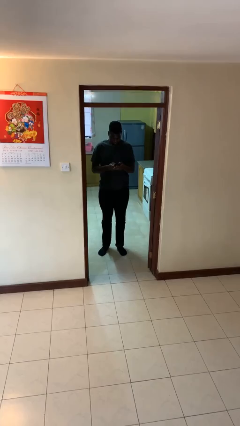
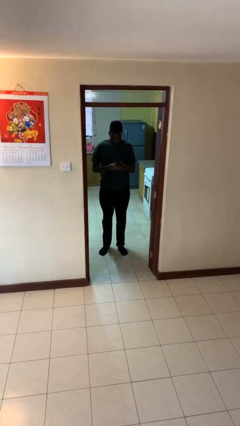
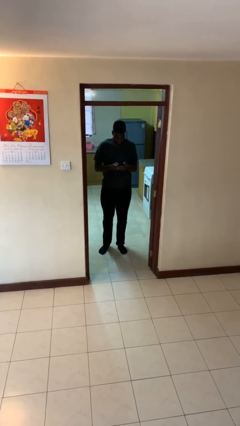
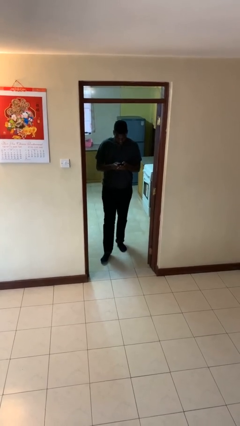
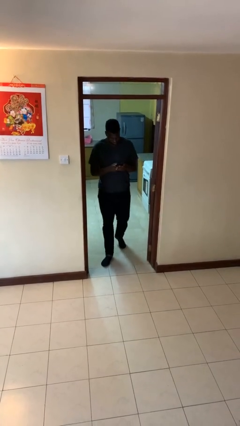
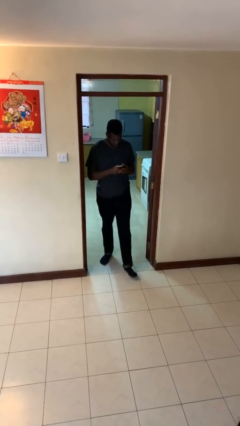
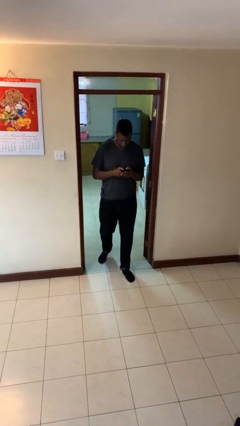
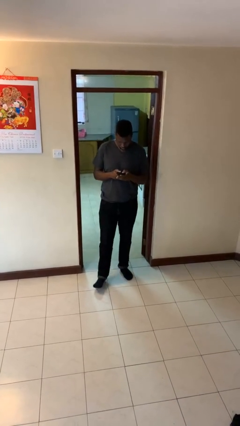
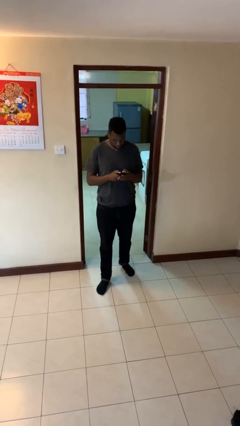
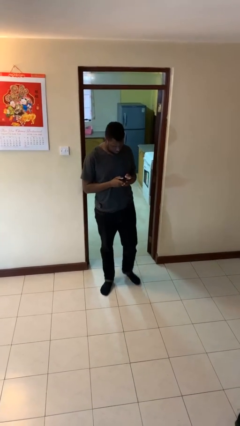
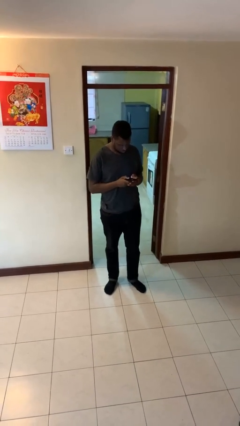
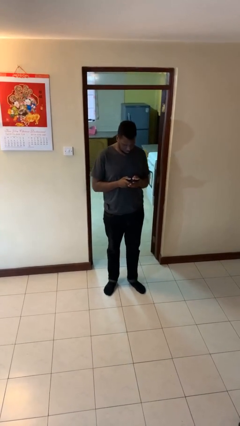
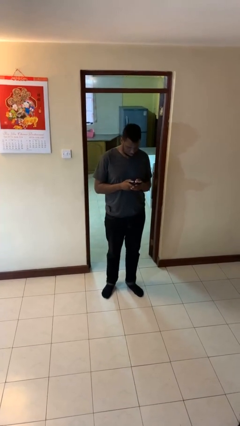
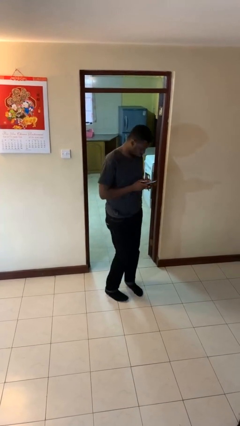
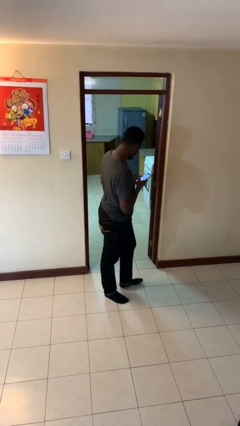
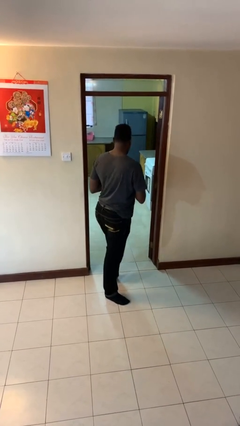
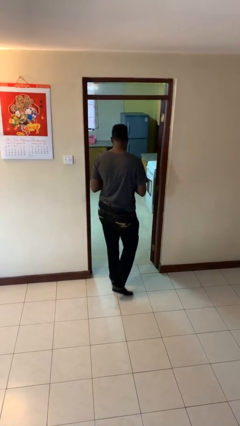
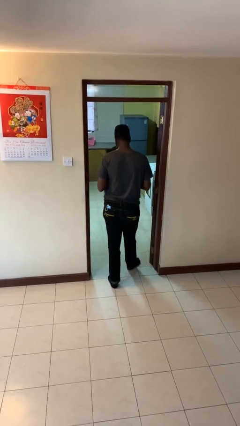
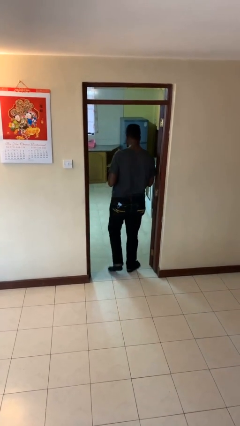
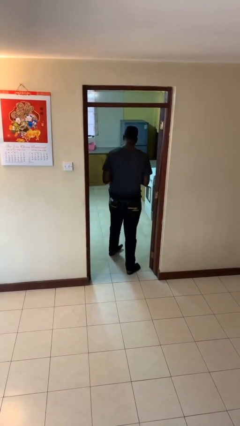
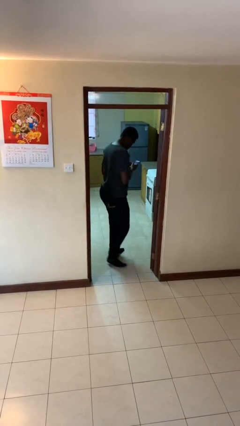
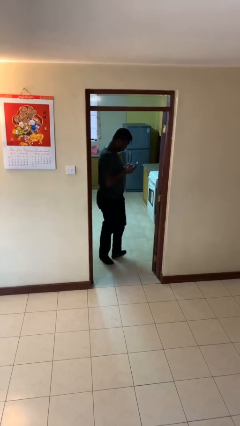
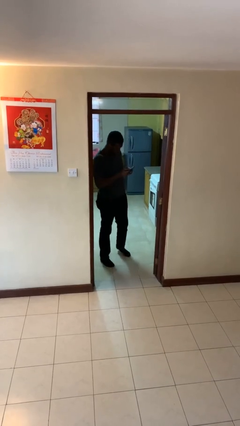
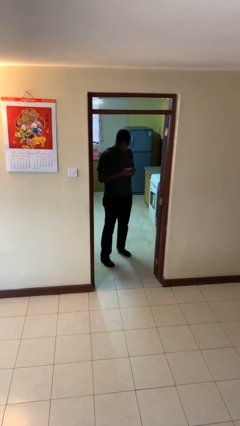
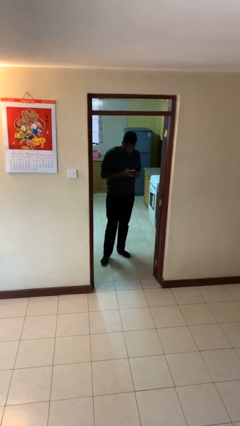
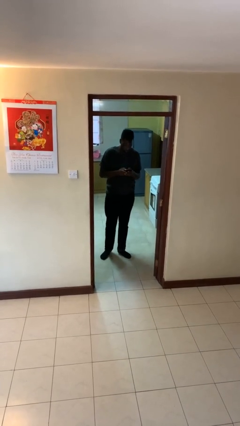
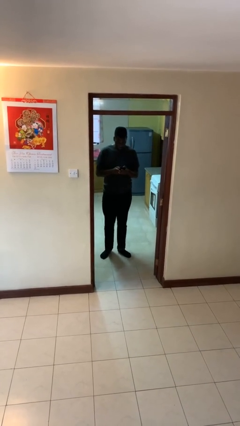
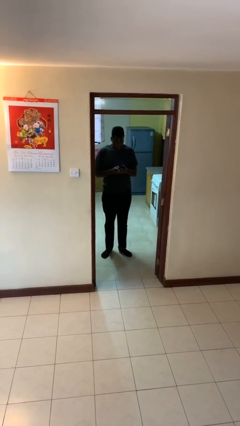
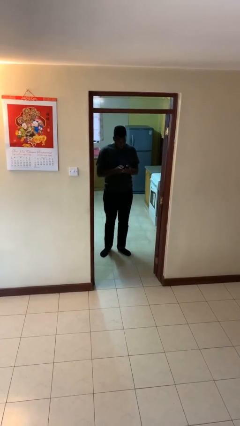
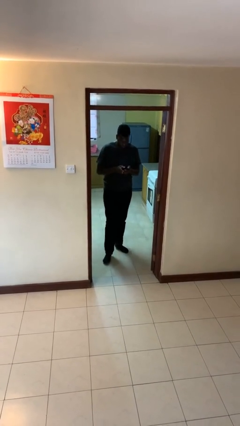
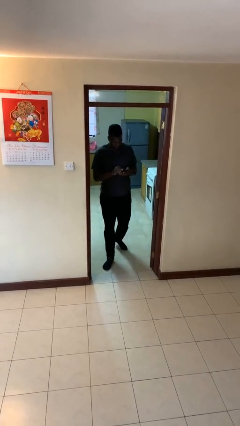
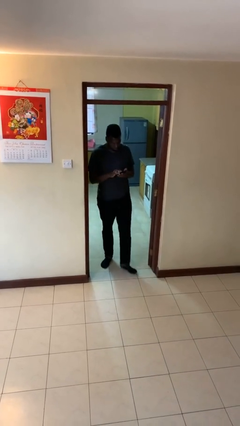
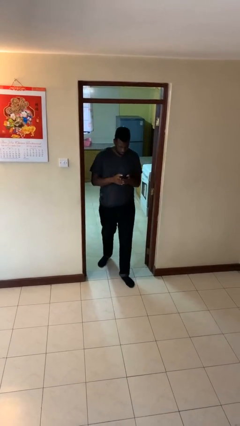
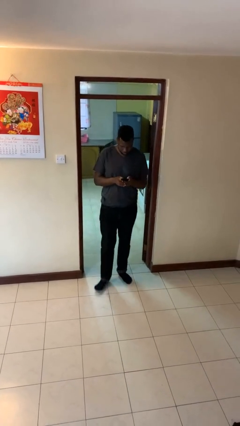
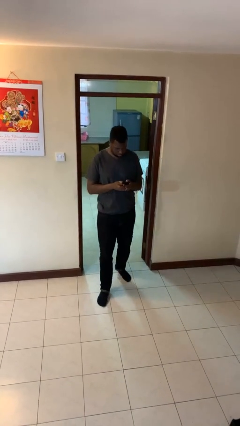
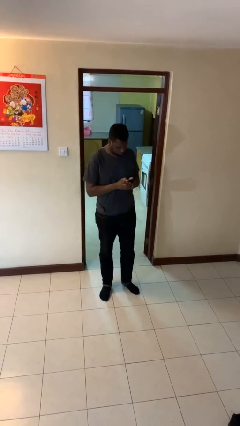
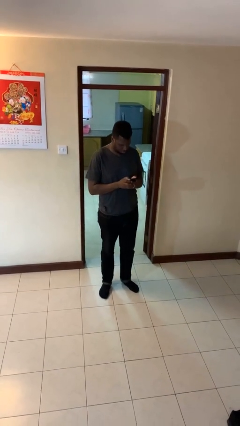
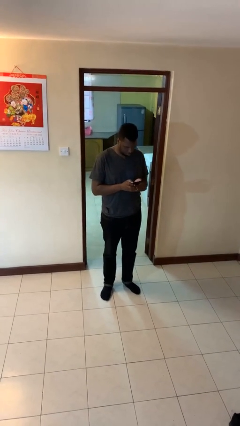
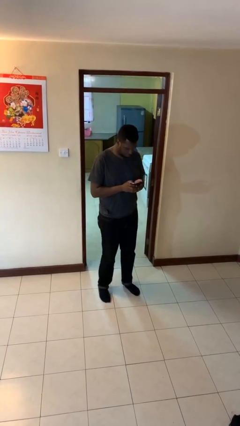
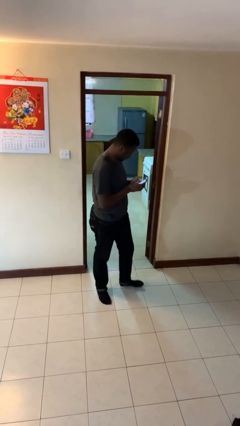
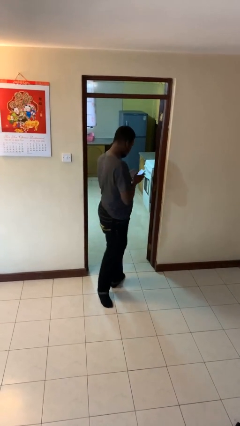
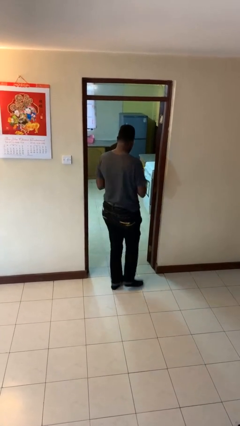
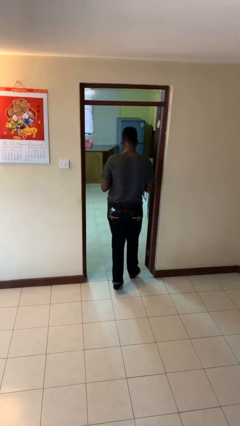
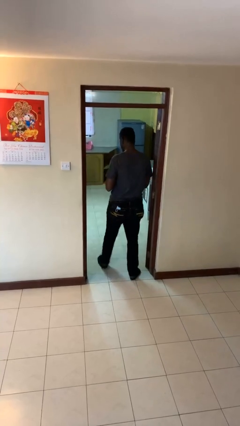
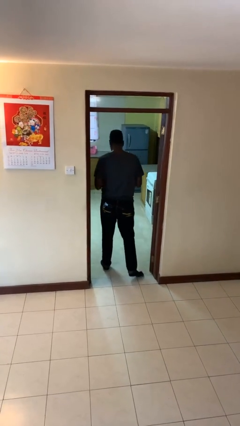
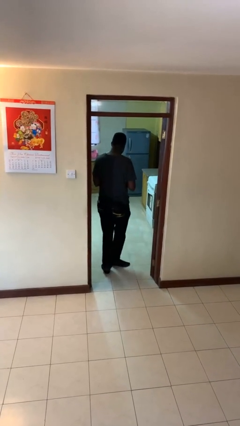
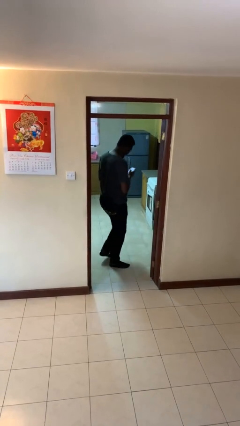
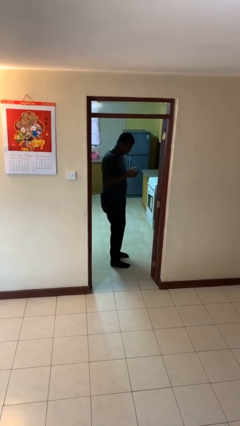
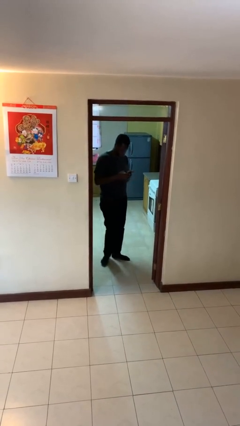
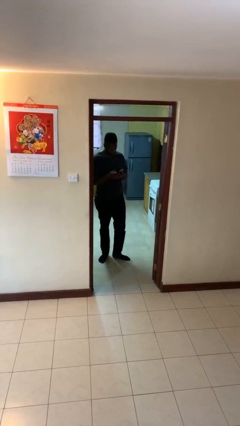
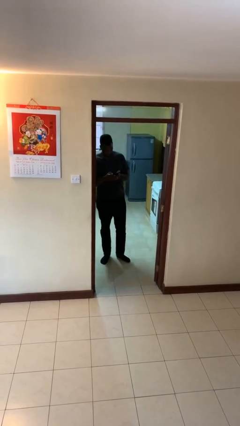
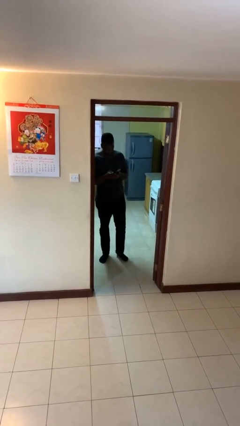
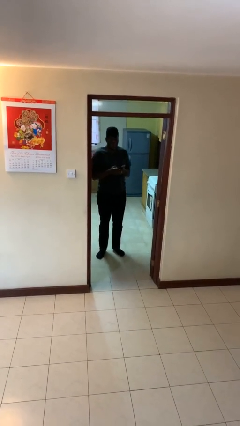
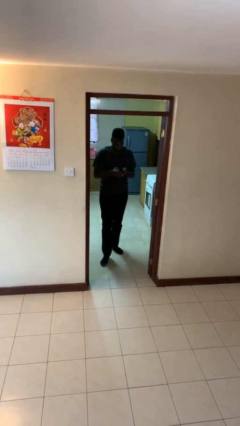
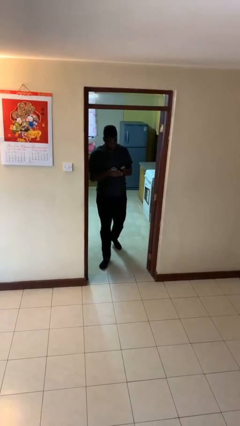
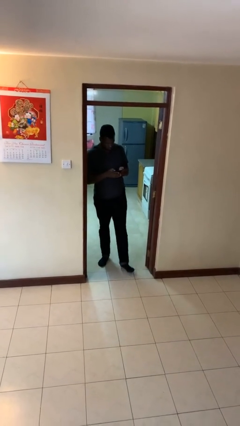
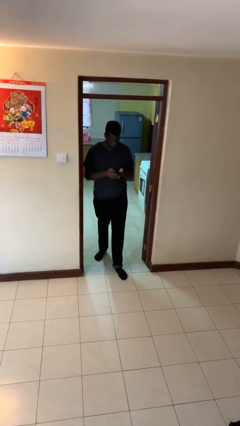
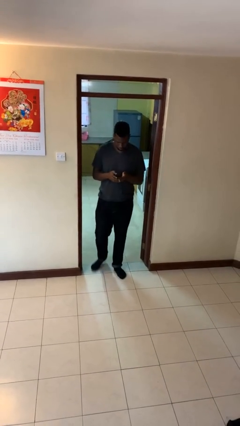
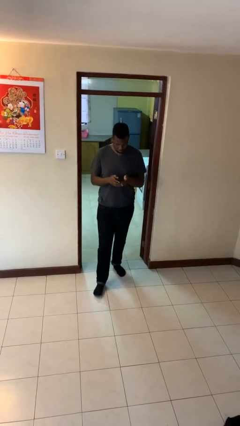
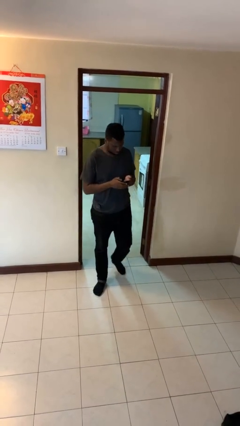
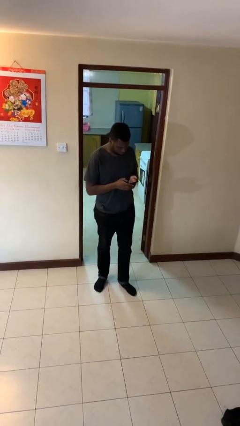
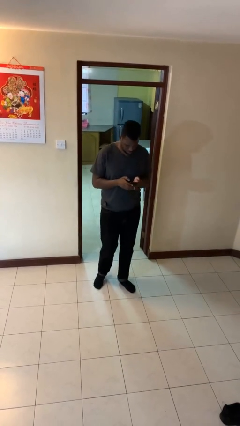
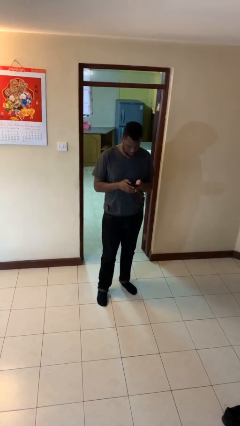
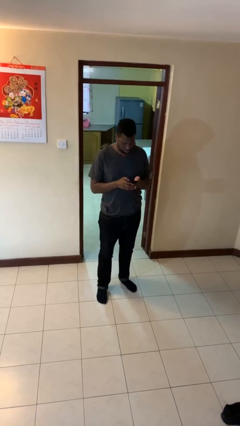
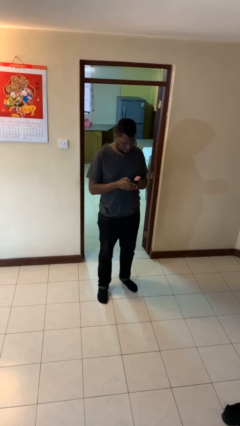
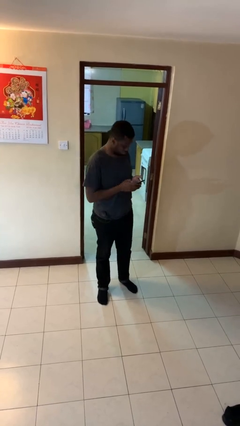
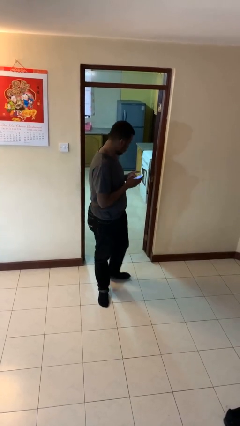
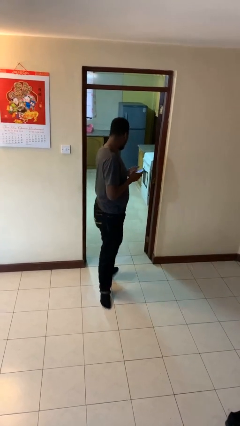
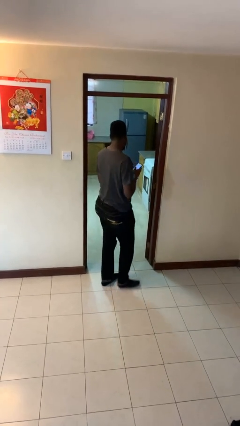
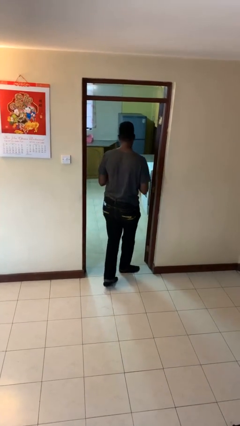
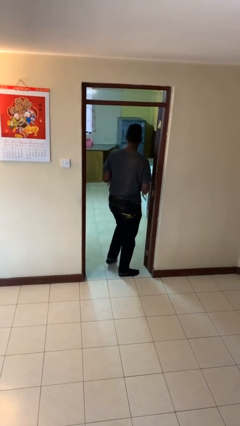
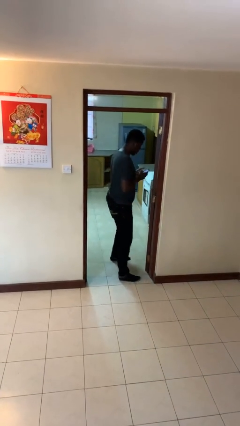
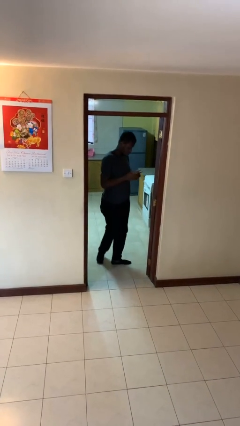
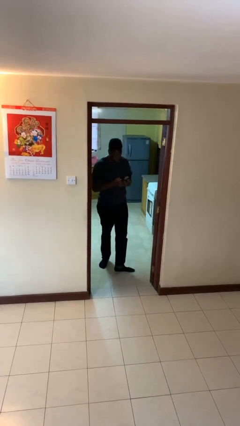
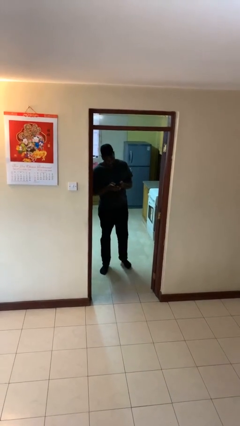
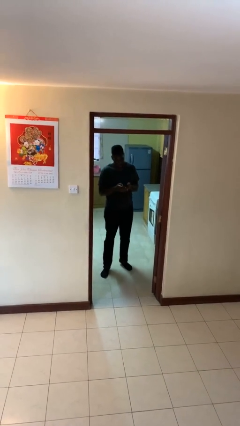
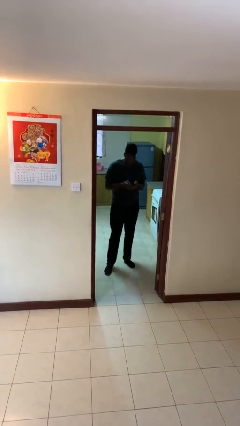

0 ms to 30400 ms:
person texts on phone

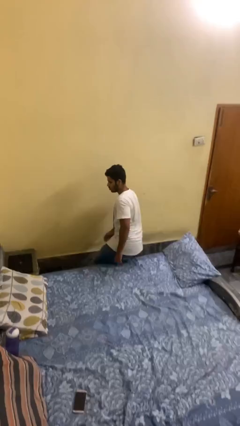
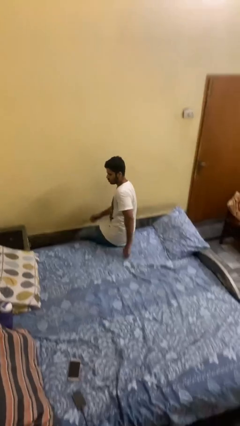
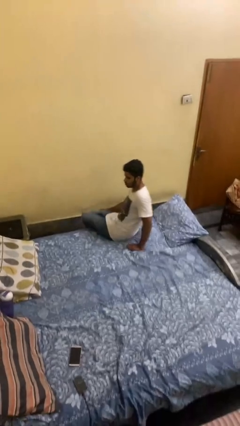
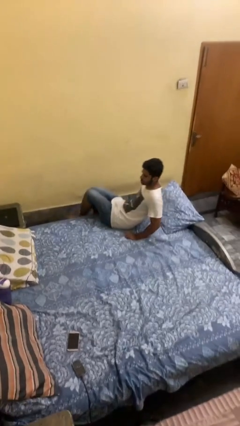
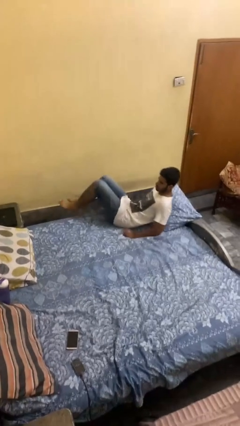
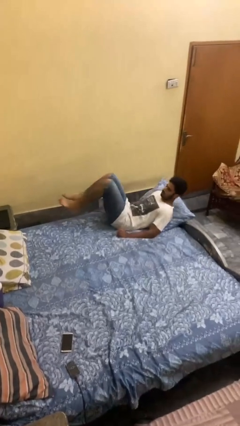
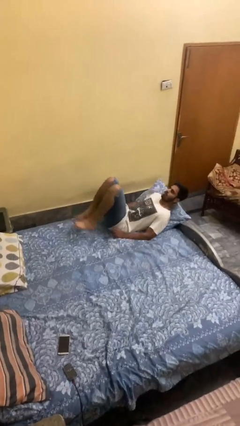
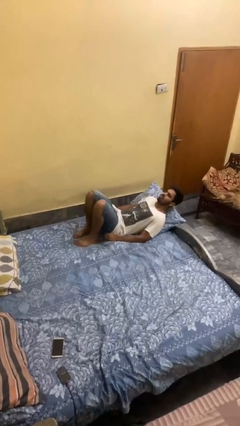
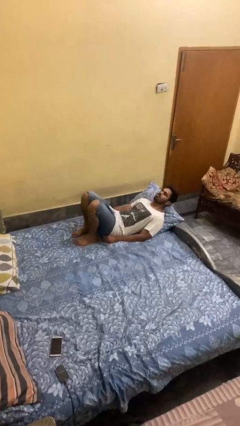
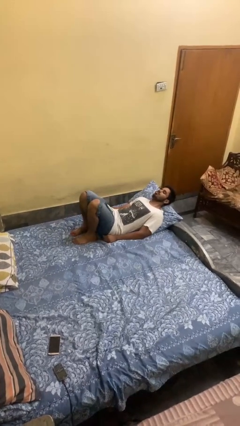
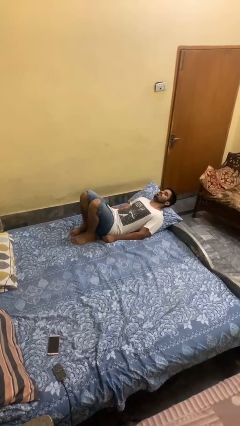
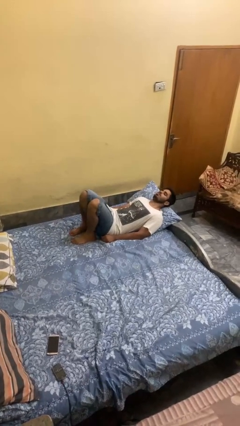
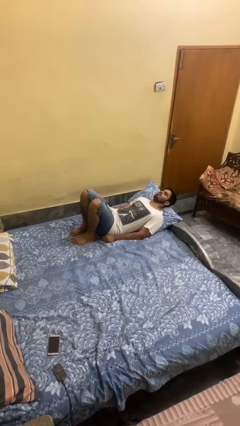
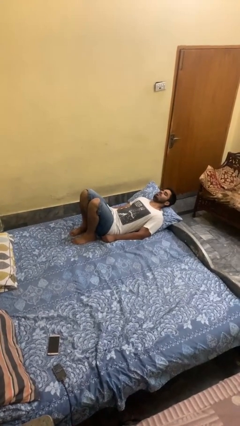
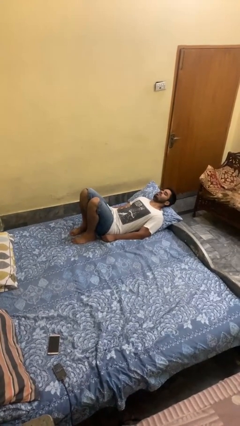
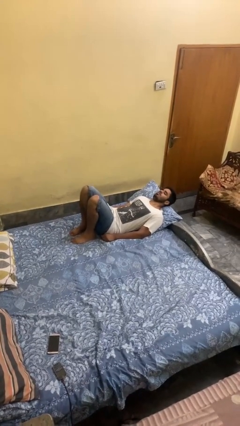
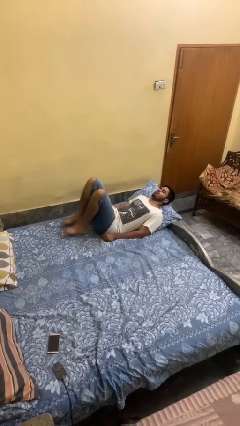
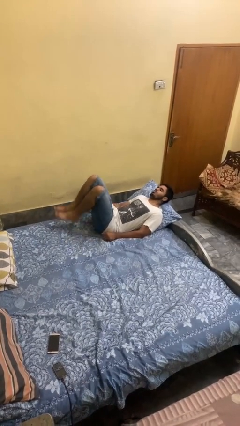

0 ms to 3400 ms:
person lies down on bed
